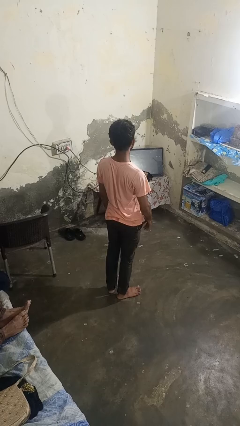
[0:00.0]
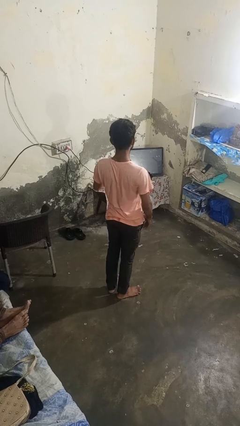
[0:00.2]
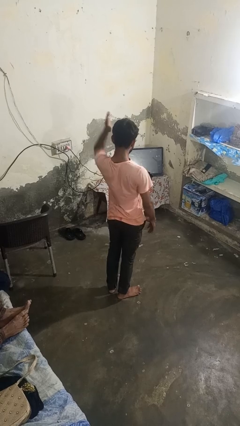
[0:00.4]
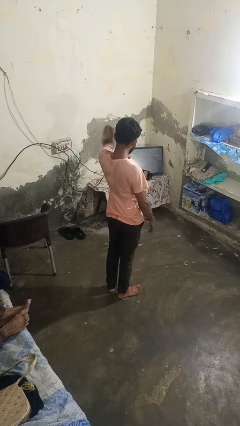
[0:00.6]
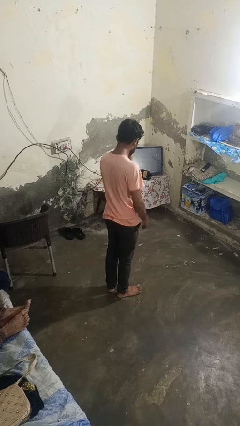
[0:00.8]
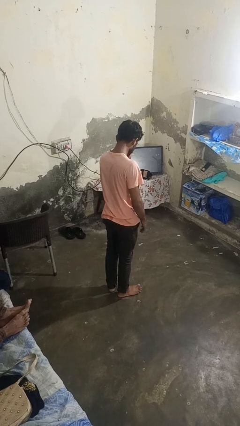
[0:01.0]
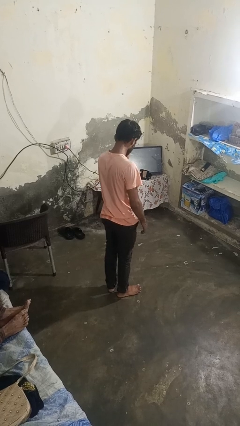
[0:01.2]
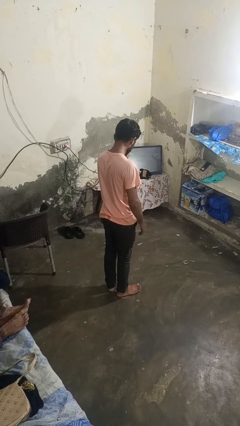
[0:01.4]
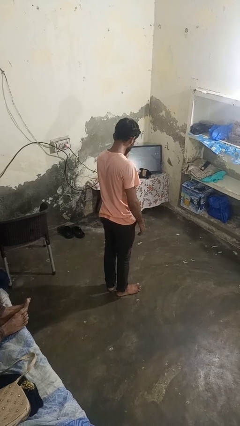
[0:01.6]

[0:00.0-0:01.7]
person karate chop

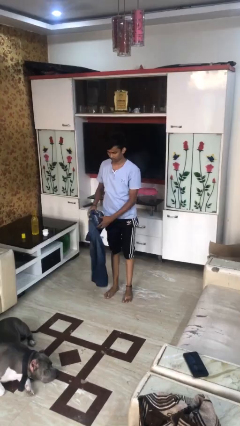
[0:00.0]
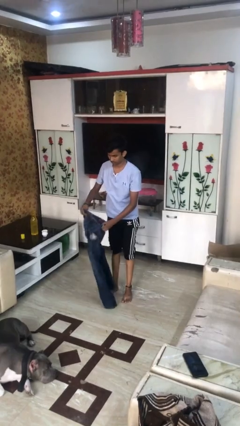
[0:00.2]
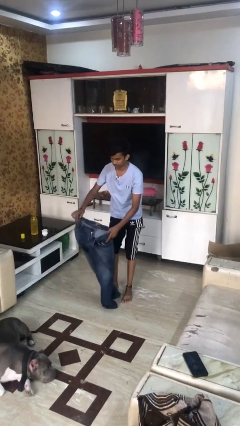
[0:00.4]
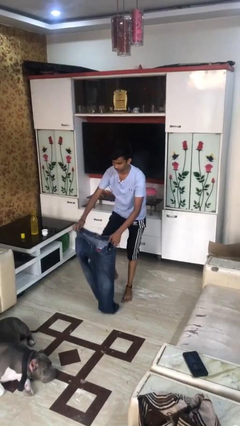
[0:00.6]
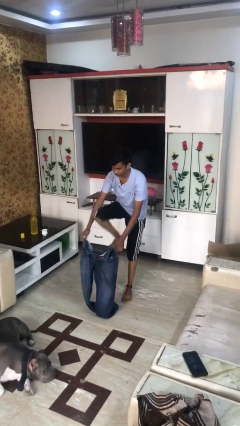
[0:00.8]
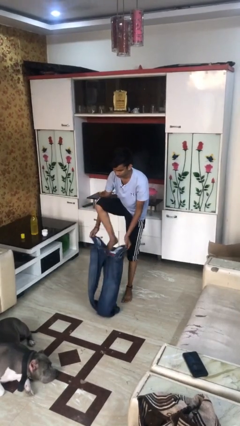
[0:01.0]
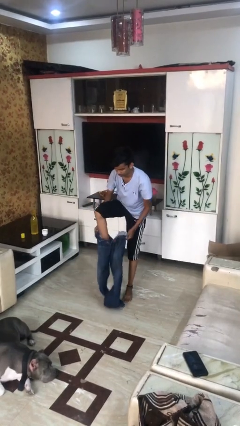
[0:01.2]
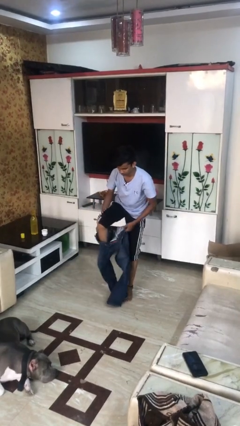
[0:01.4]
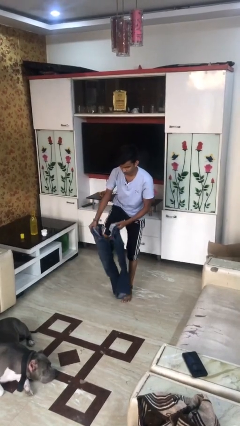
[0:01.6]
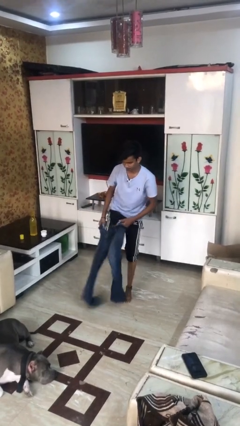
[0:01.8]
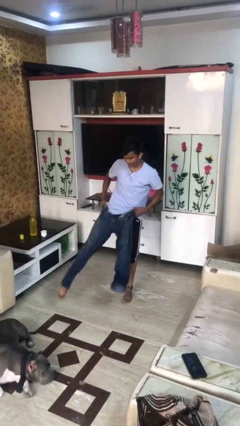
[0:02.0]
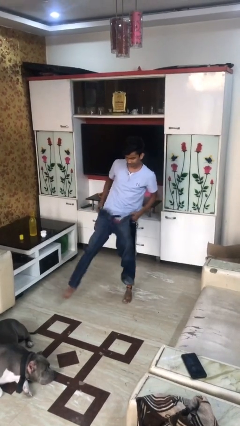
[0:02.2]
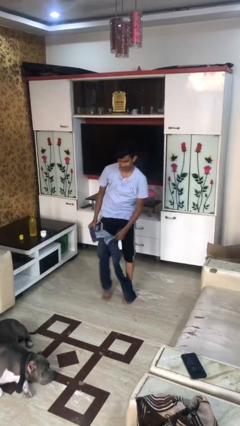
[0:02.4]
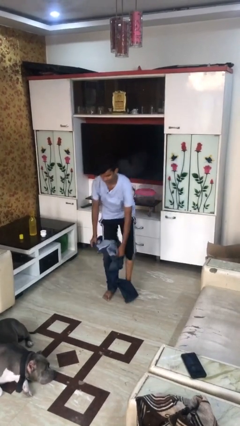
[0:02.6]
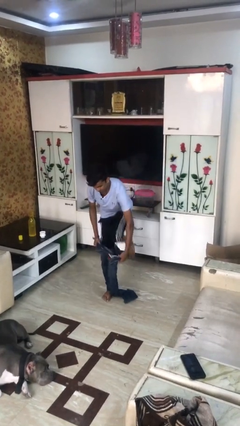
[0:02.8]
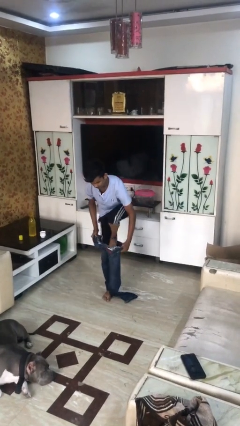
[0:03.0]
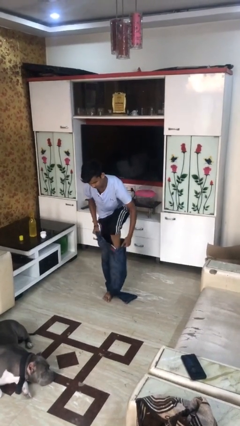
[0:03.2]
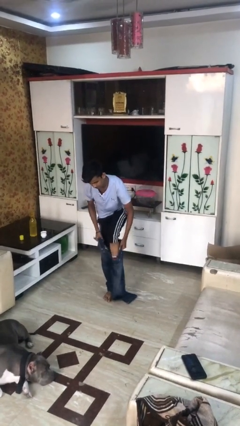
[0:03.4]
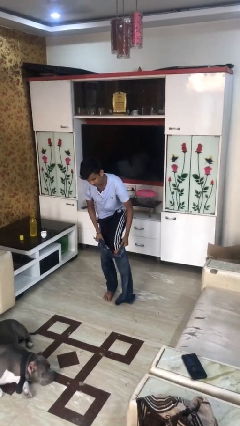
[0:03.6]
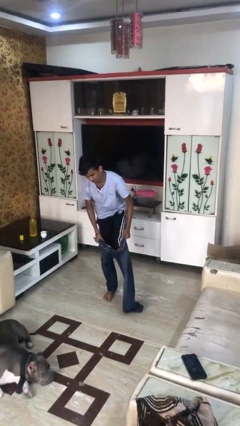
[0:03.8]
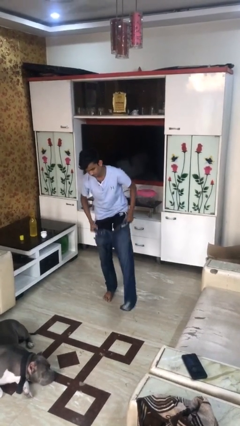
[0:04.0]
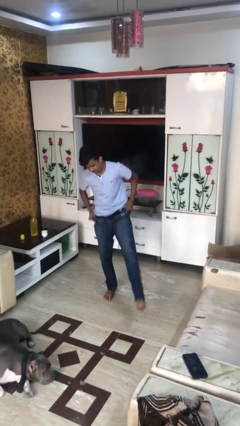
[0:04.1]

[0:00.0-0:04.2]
person puts on pants

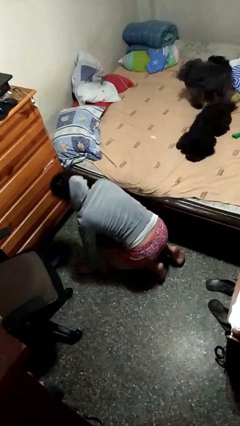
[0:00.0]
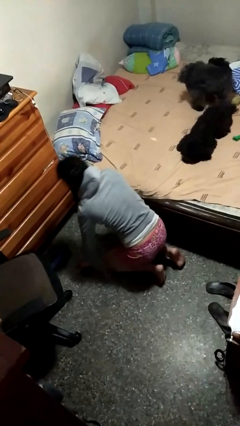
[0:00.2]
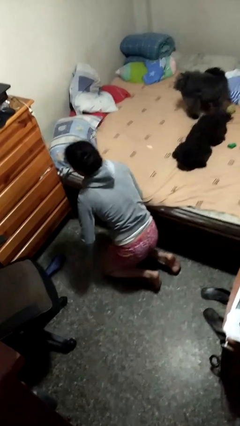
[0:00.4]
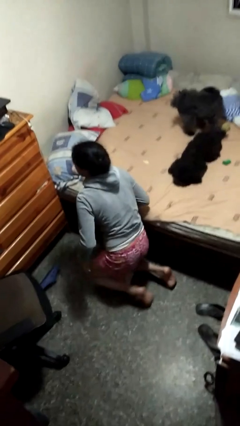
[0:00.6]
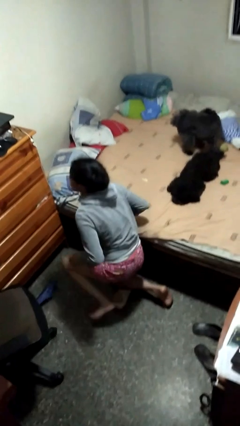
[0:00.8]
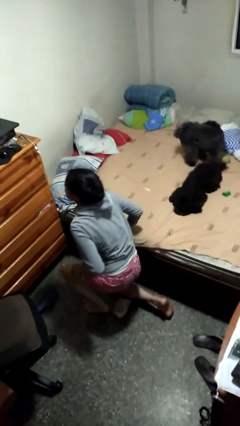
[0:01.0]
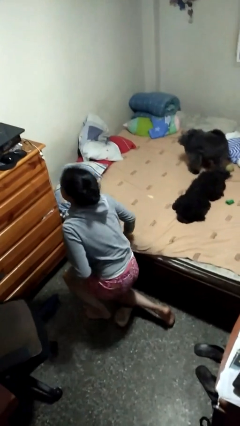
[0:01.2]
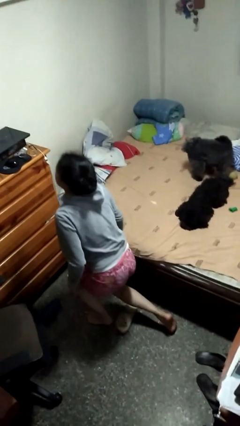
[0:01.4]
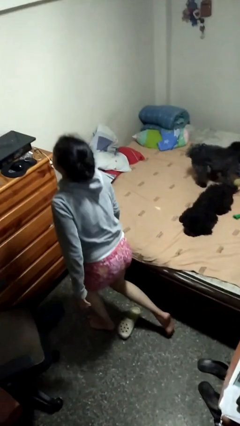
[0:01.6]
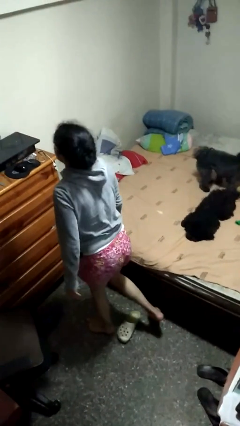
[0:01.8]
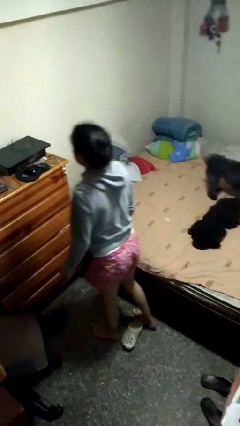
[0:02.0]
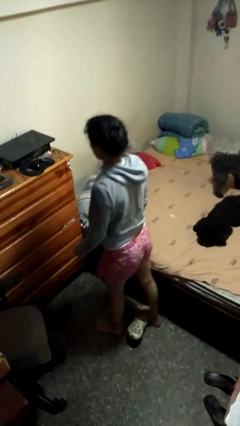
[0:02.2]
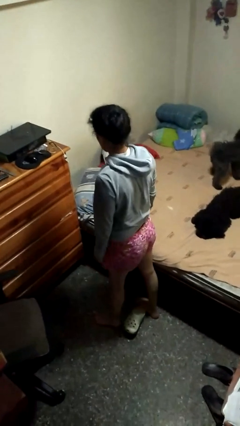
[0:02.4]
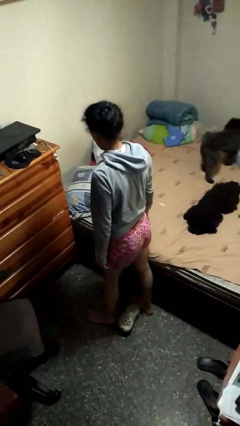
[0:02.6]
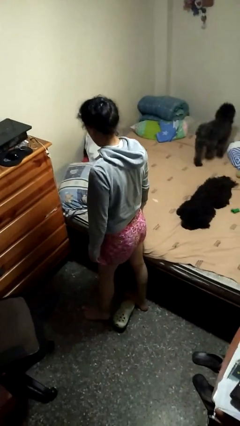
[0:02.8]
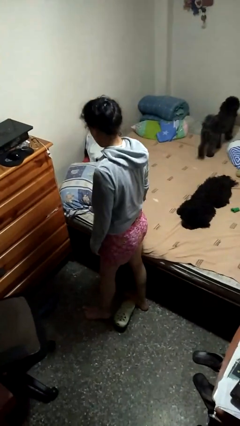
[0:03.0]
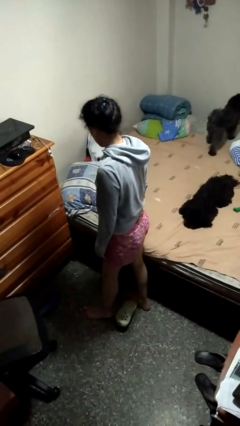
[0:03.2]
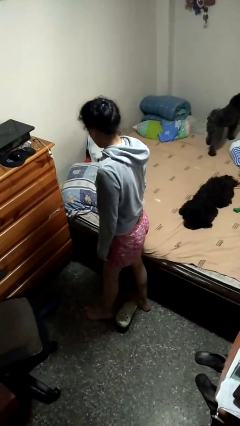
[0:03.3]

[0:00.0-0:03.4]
person stands up from floor

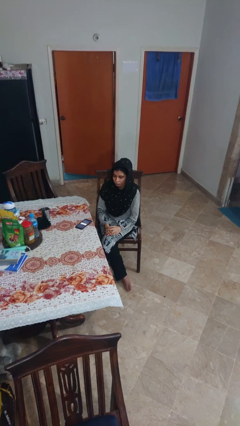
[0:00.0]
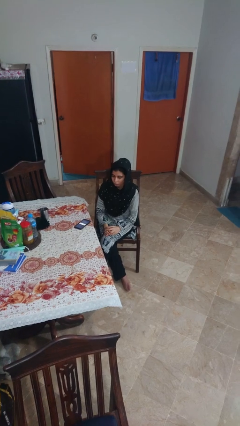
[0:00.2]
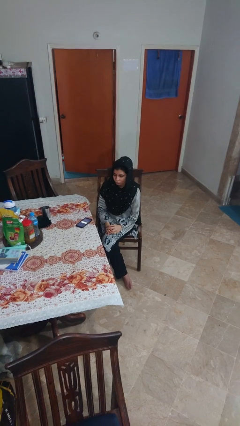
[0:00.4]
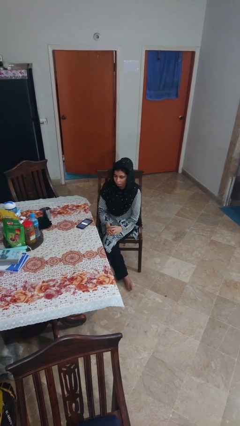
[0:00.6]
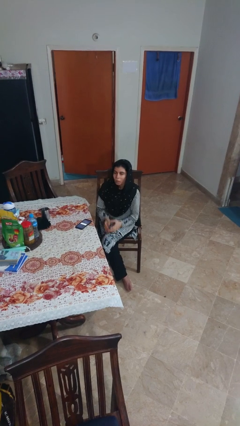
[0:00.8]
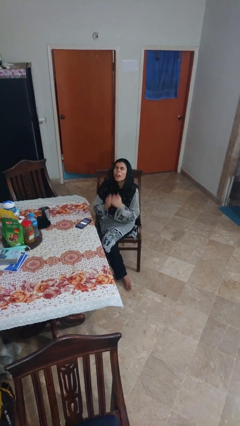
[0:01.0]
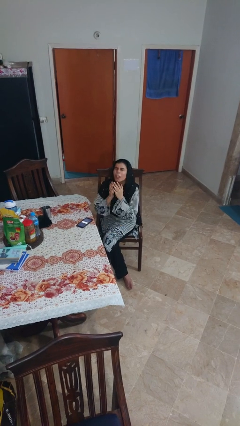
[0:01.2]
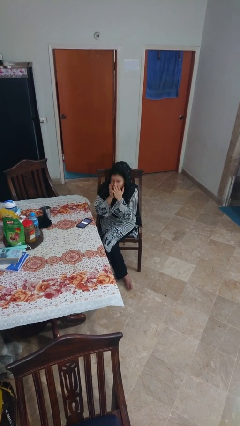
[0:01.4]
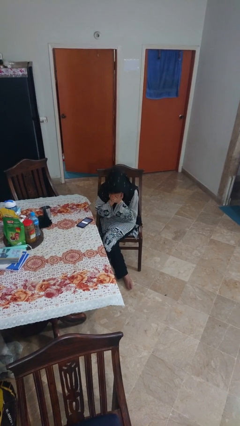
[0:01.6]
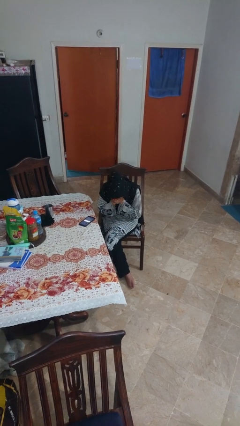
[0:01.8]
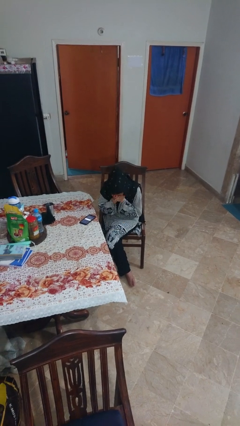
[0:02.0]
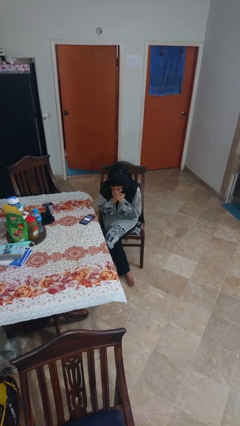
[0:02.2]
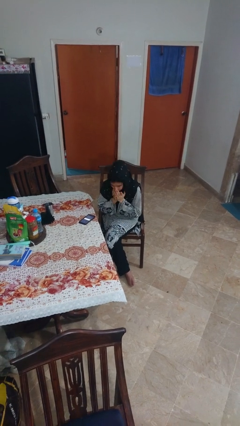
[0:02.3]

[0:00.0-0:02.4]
person sneezes into hand

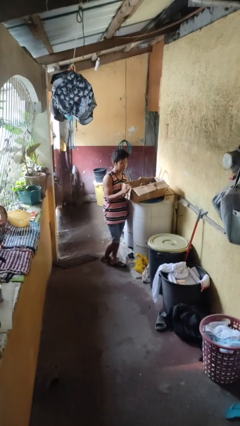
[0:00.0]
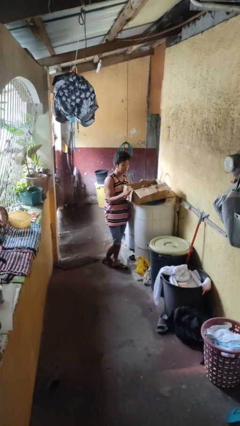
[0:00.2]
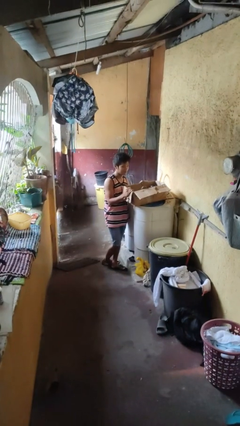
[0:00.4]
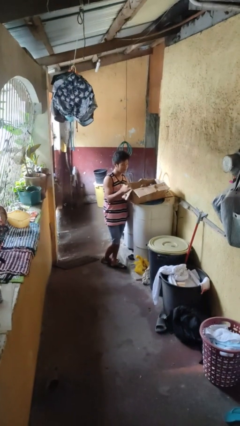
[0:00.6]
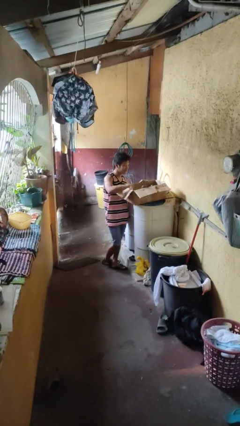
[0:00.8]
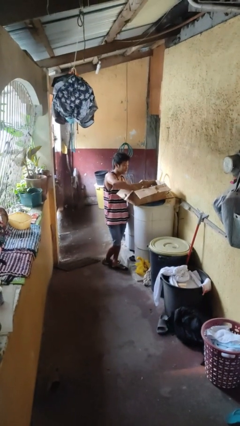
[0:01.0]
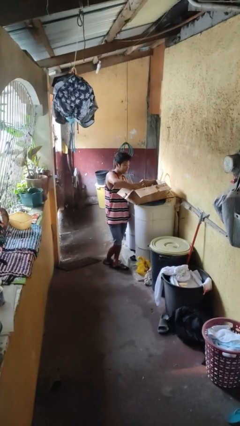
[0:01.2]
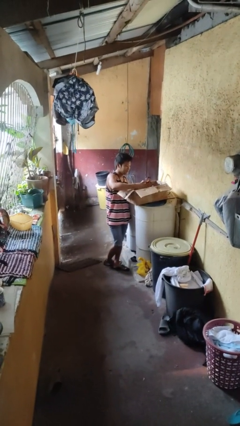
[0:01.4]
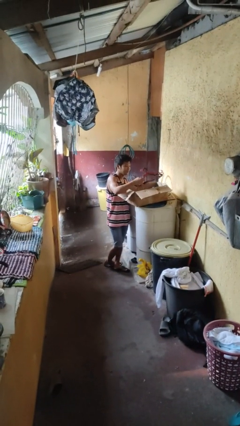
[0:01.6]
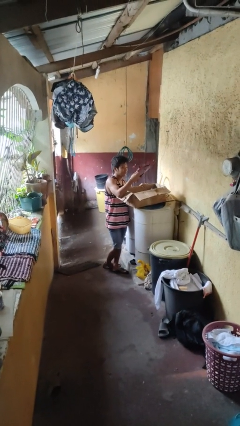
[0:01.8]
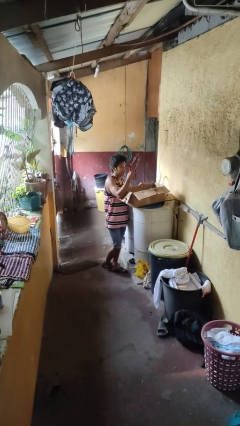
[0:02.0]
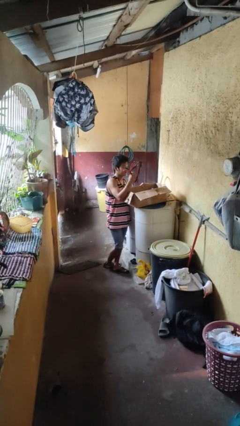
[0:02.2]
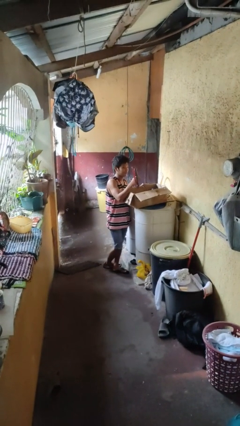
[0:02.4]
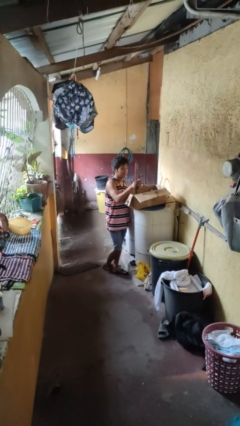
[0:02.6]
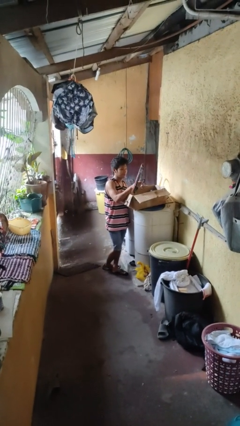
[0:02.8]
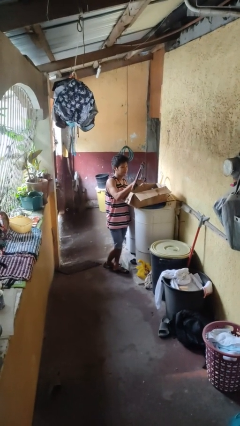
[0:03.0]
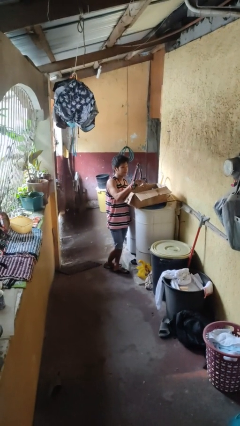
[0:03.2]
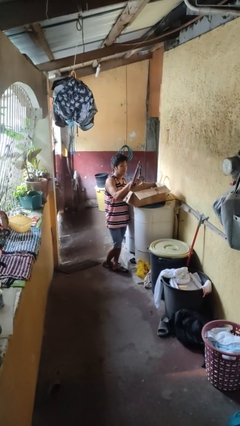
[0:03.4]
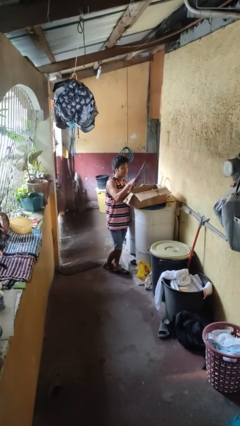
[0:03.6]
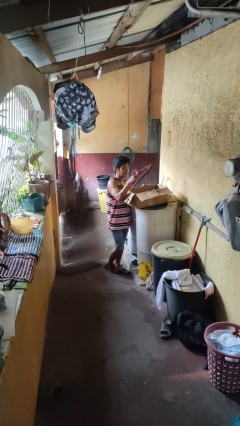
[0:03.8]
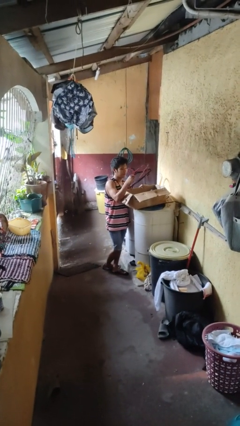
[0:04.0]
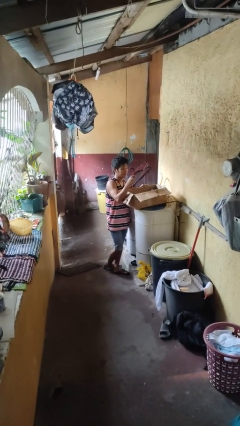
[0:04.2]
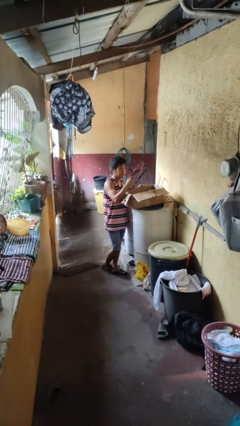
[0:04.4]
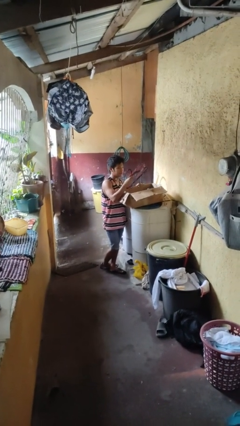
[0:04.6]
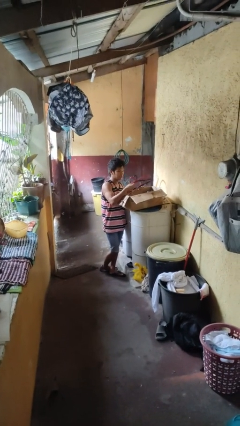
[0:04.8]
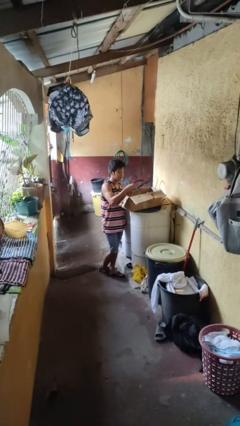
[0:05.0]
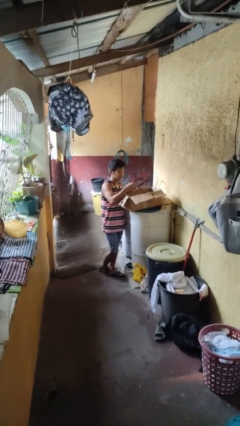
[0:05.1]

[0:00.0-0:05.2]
person takes object from box

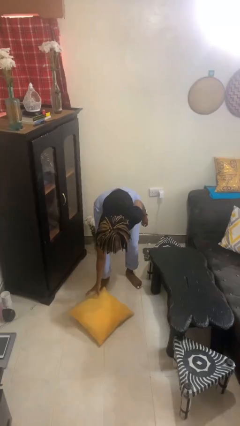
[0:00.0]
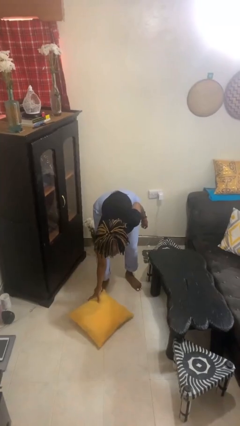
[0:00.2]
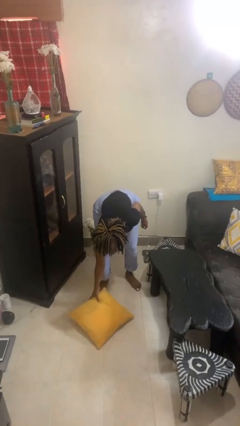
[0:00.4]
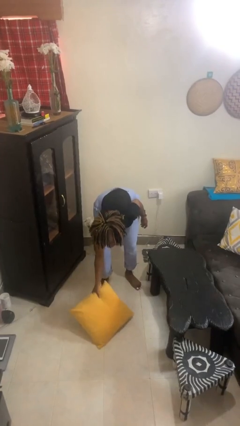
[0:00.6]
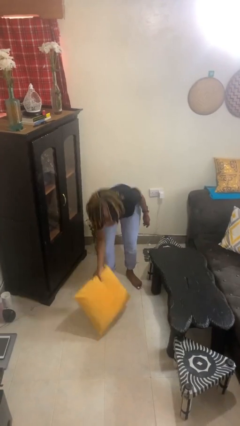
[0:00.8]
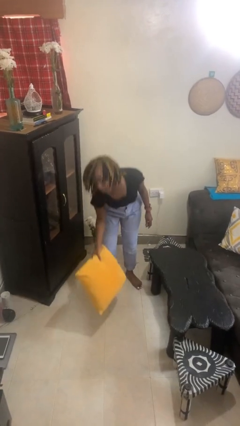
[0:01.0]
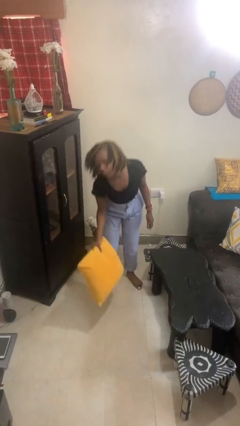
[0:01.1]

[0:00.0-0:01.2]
person picks up object from floor
